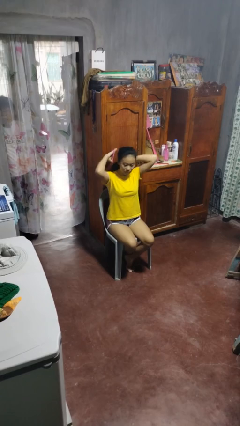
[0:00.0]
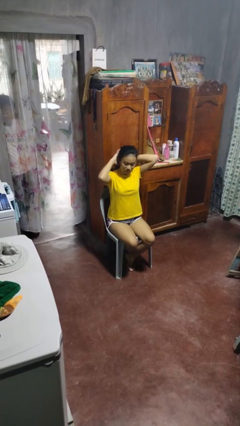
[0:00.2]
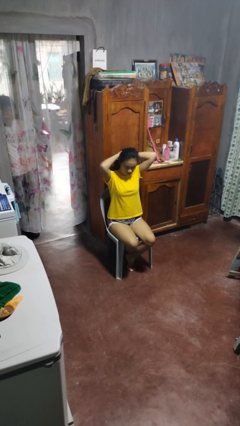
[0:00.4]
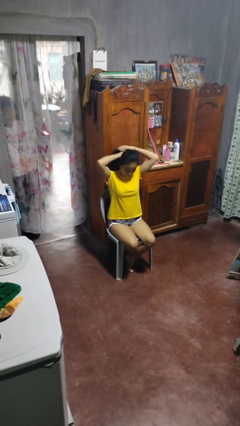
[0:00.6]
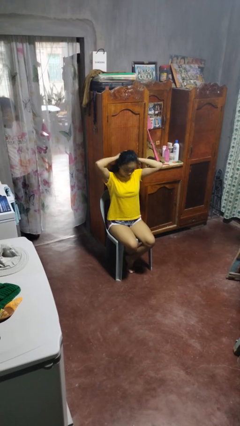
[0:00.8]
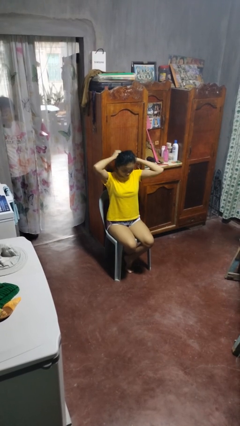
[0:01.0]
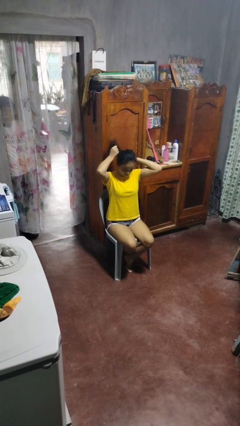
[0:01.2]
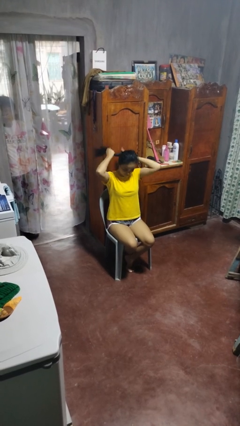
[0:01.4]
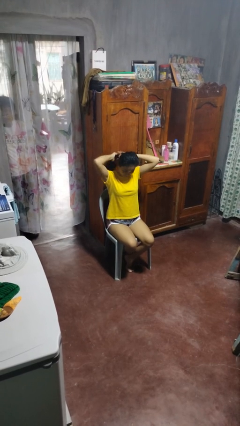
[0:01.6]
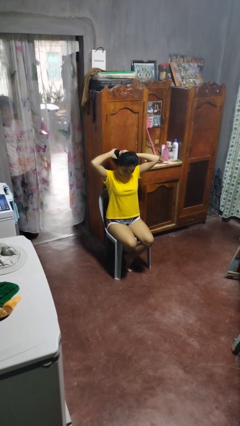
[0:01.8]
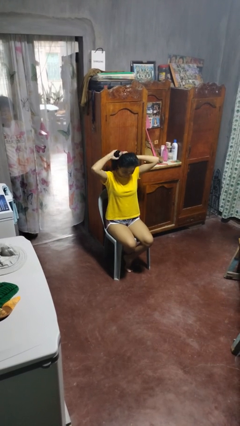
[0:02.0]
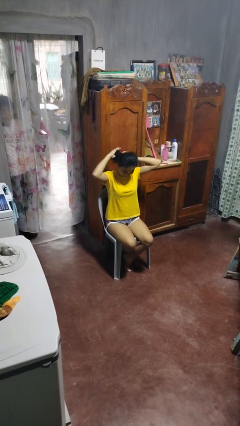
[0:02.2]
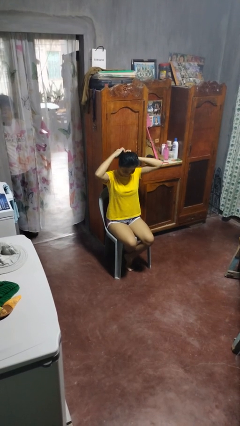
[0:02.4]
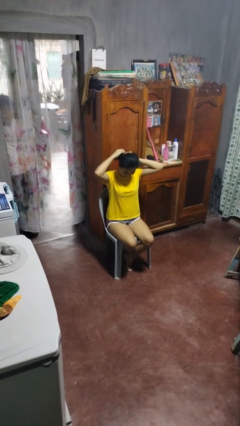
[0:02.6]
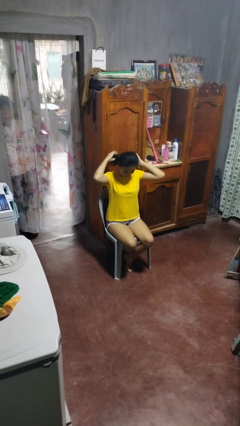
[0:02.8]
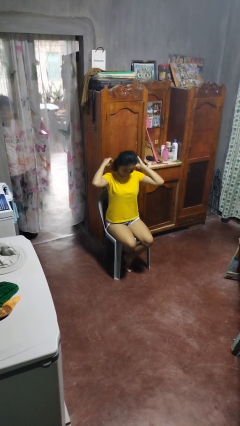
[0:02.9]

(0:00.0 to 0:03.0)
person puts hair in ponytail

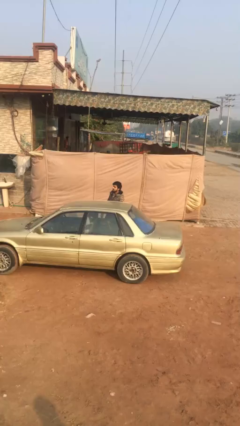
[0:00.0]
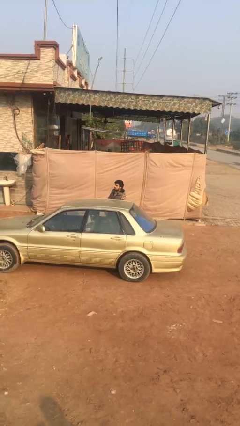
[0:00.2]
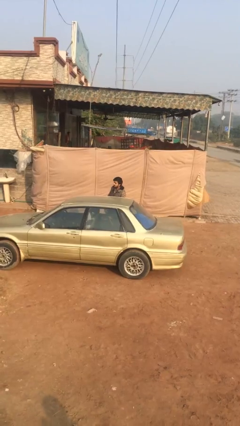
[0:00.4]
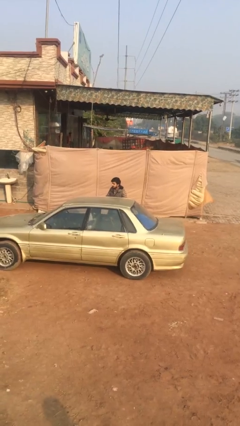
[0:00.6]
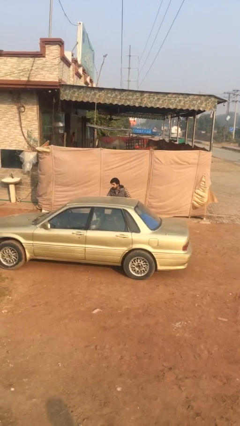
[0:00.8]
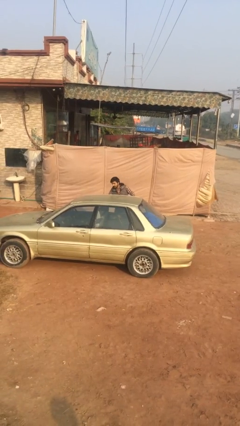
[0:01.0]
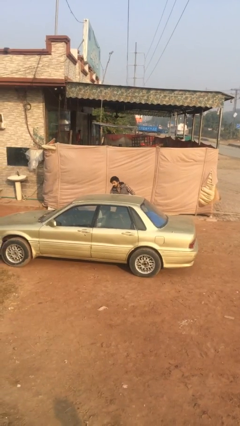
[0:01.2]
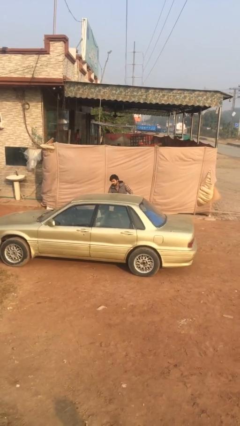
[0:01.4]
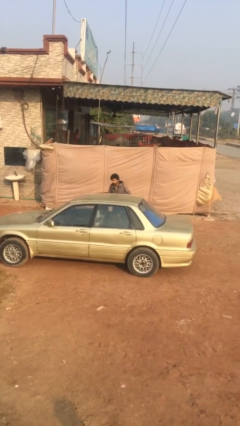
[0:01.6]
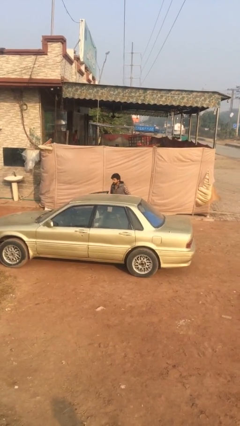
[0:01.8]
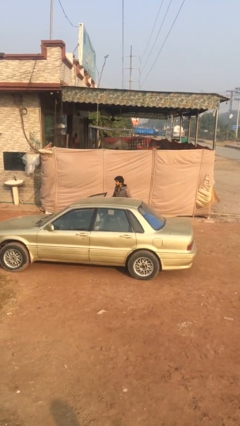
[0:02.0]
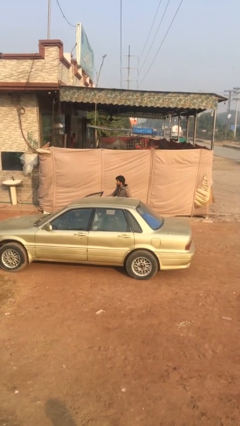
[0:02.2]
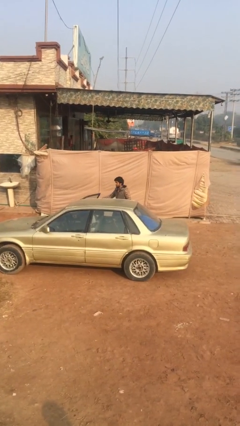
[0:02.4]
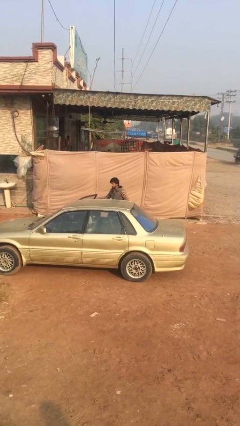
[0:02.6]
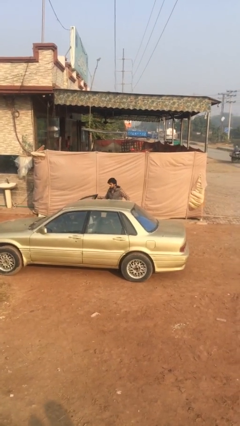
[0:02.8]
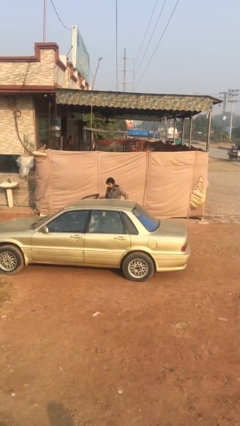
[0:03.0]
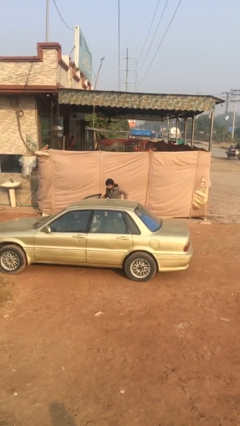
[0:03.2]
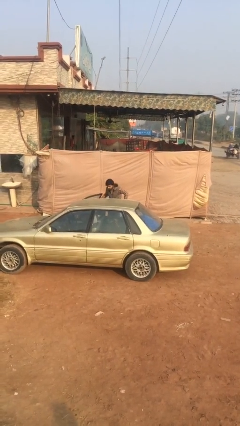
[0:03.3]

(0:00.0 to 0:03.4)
person opens car door

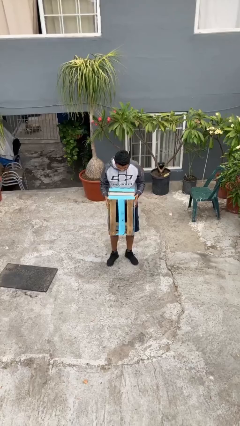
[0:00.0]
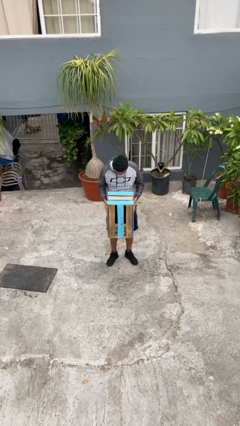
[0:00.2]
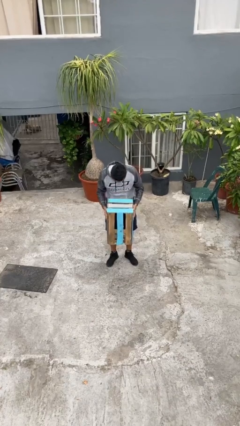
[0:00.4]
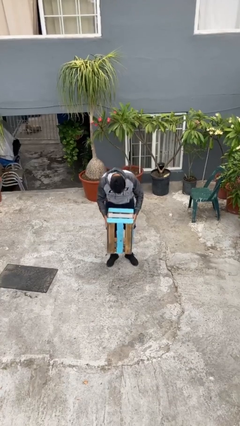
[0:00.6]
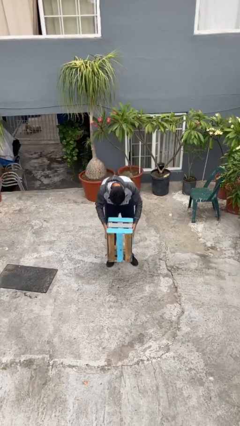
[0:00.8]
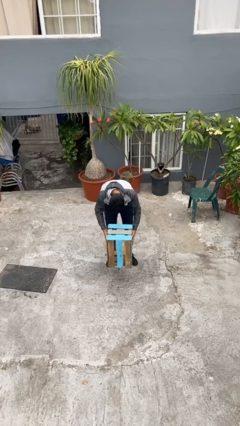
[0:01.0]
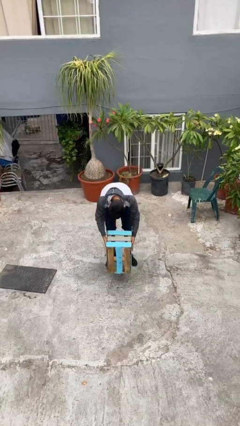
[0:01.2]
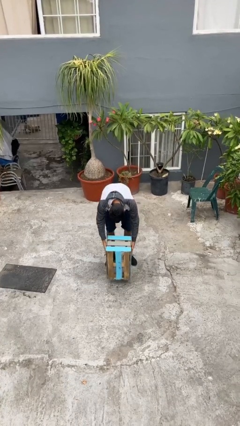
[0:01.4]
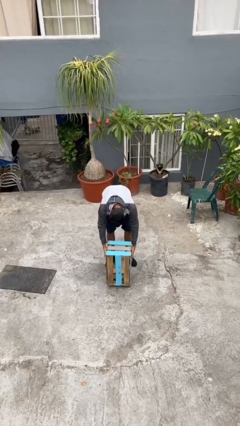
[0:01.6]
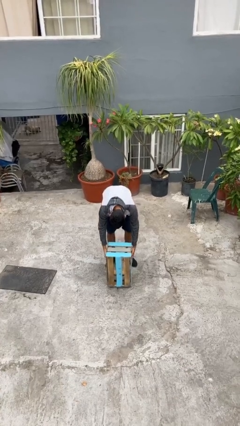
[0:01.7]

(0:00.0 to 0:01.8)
person puts down object on floor

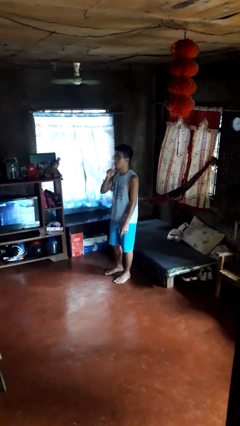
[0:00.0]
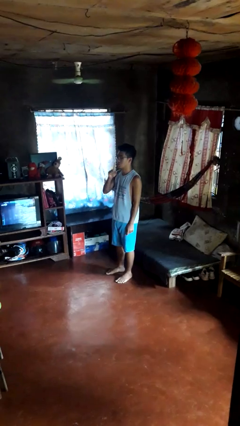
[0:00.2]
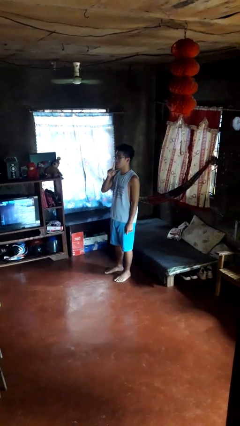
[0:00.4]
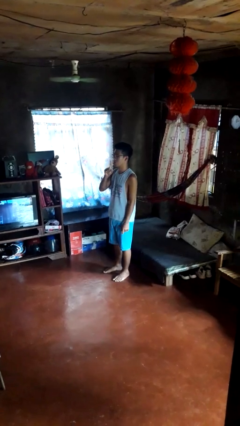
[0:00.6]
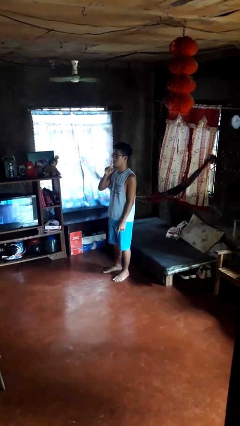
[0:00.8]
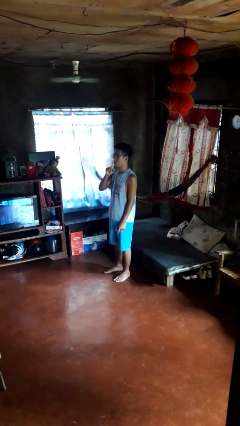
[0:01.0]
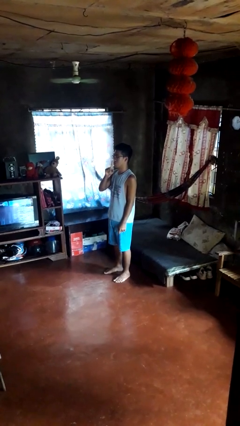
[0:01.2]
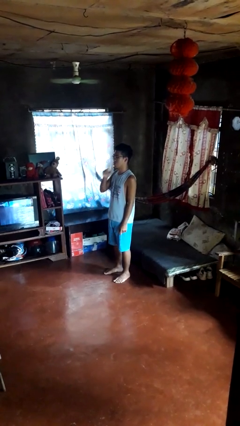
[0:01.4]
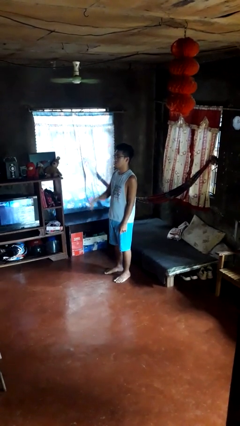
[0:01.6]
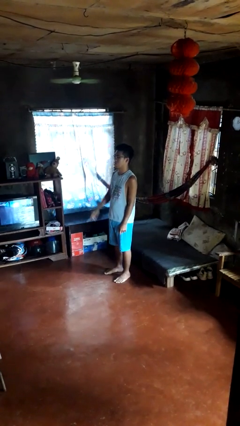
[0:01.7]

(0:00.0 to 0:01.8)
person gestures be quiet

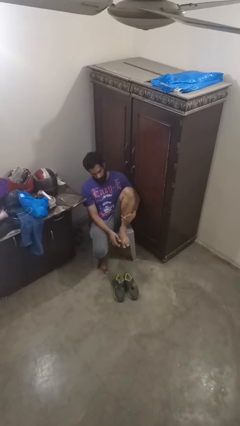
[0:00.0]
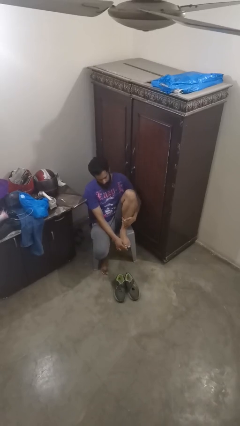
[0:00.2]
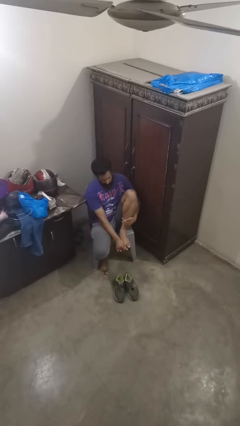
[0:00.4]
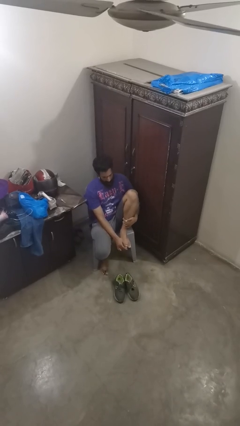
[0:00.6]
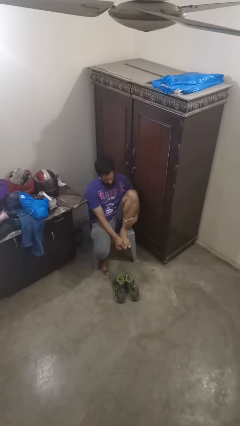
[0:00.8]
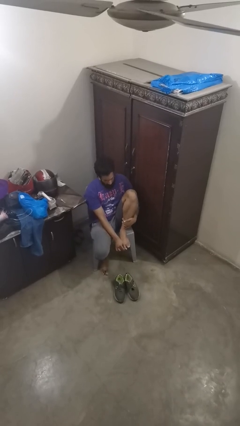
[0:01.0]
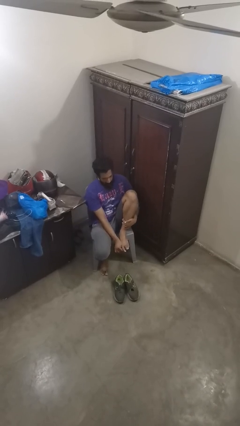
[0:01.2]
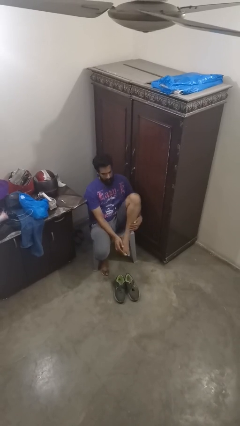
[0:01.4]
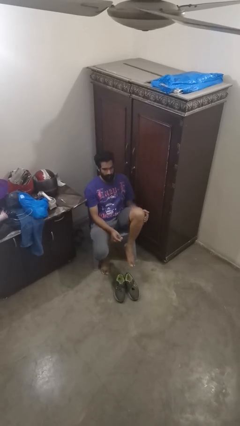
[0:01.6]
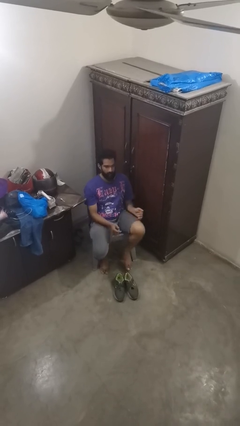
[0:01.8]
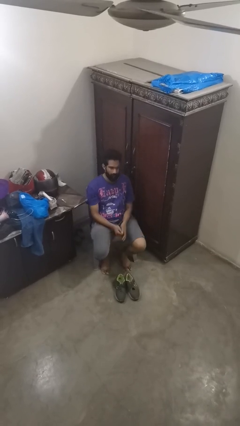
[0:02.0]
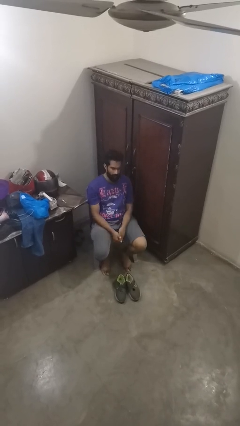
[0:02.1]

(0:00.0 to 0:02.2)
person rubs foot

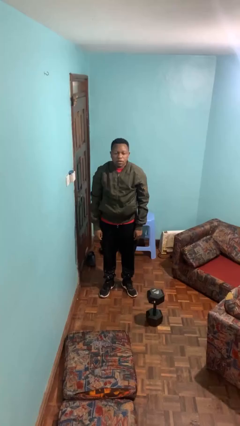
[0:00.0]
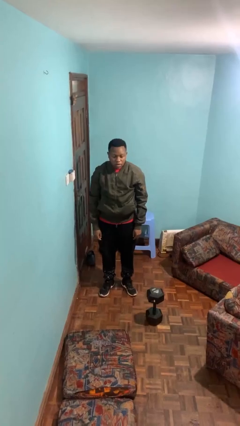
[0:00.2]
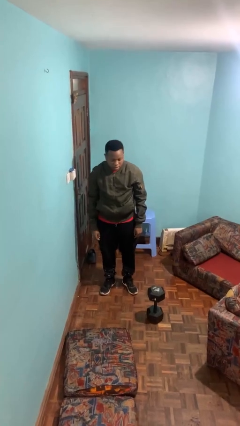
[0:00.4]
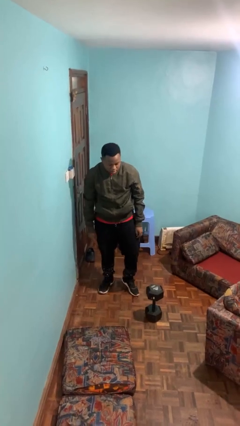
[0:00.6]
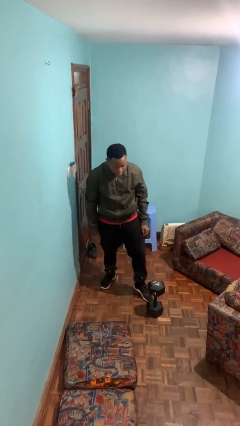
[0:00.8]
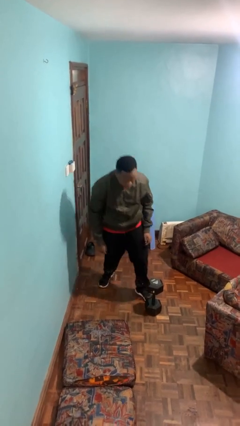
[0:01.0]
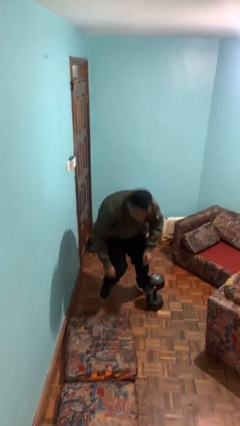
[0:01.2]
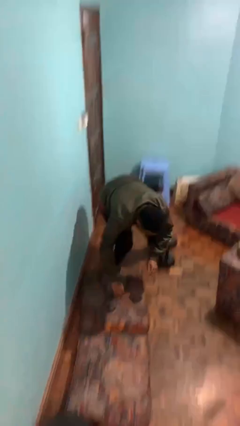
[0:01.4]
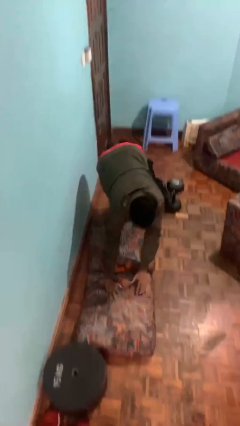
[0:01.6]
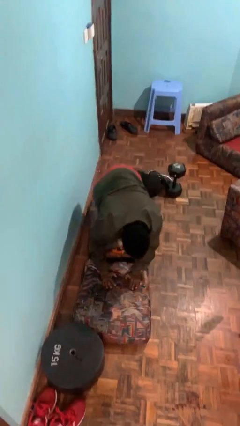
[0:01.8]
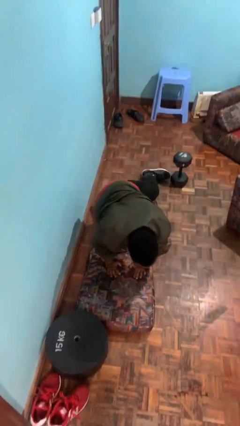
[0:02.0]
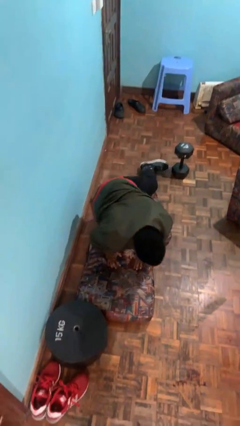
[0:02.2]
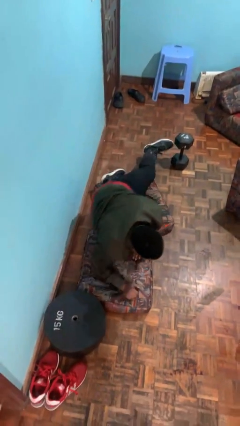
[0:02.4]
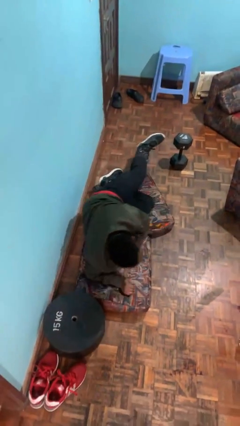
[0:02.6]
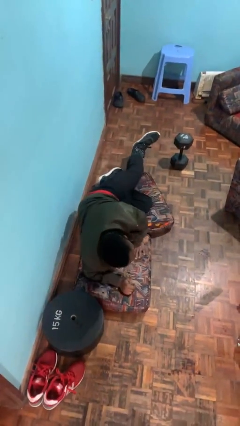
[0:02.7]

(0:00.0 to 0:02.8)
person trips on object on floor

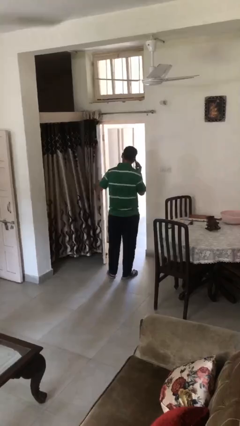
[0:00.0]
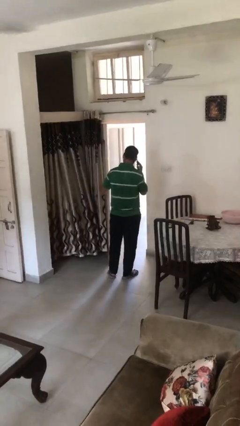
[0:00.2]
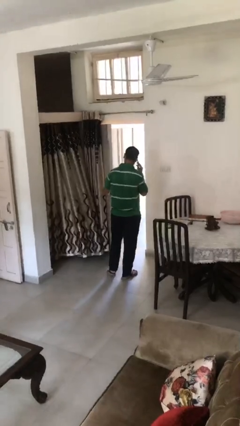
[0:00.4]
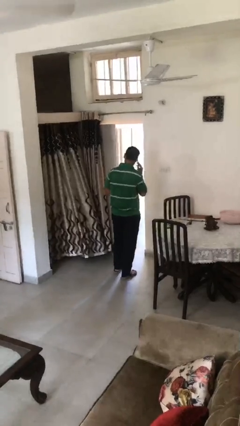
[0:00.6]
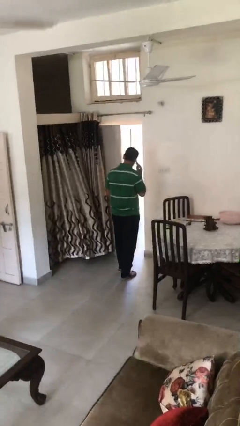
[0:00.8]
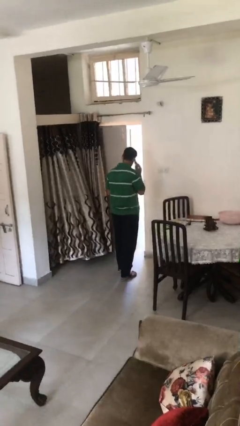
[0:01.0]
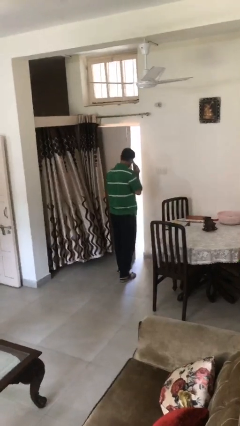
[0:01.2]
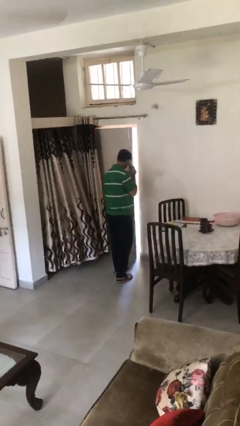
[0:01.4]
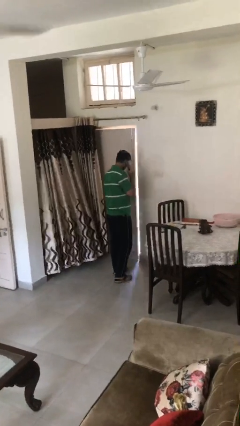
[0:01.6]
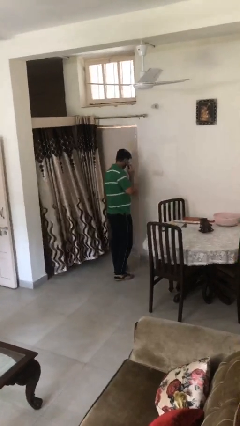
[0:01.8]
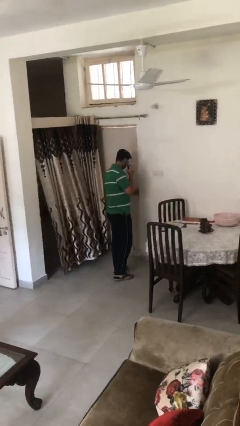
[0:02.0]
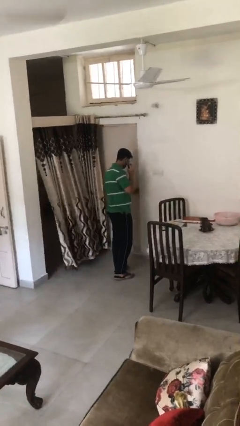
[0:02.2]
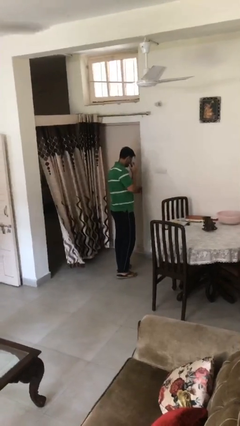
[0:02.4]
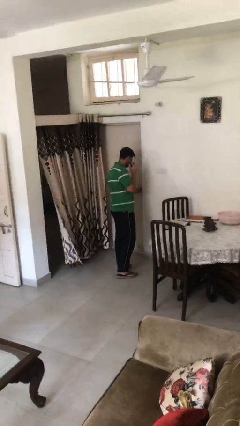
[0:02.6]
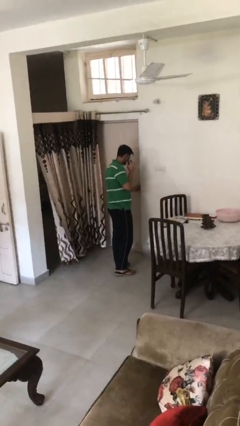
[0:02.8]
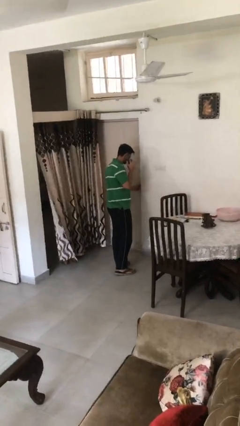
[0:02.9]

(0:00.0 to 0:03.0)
person closes facility door
